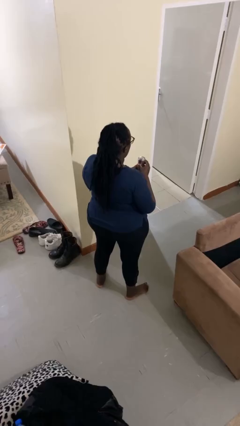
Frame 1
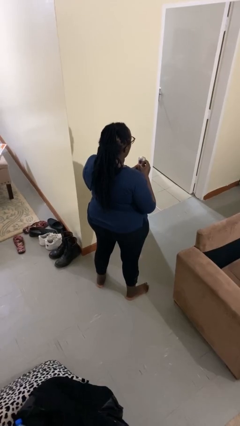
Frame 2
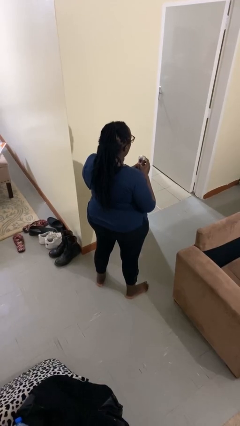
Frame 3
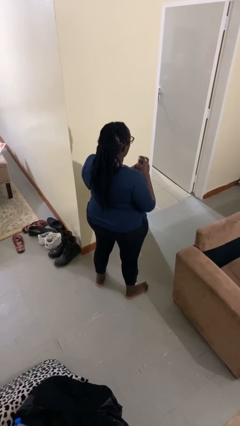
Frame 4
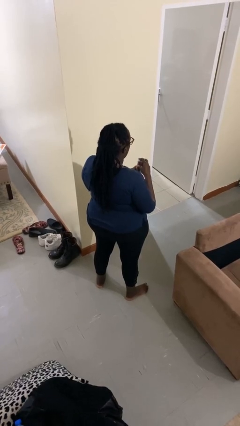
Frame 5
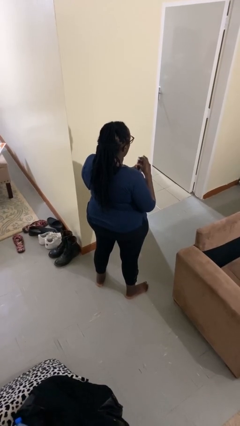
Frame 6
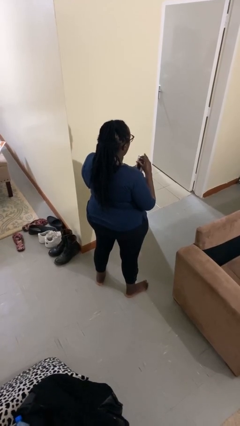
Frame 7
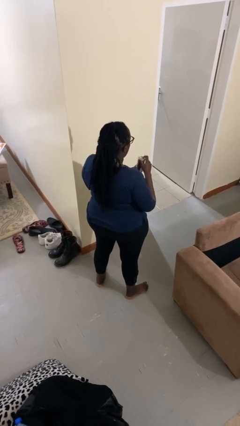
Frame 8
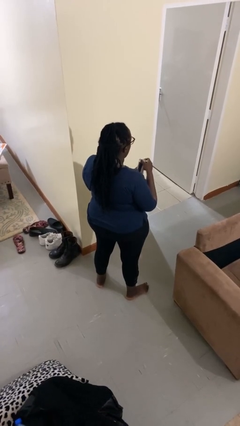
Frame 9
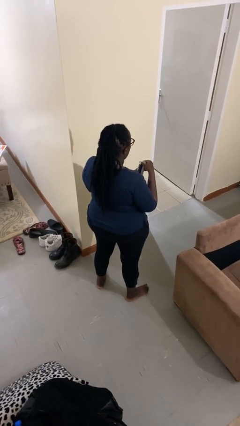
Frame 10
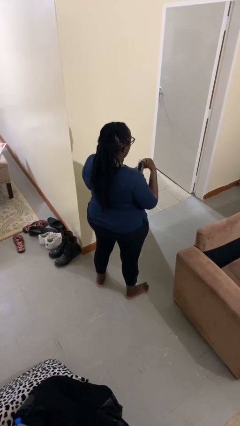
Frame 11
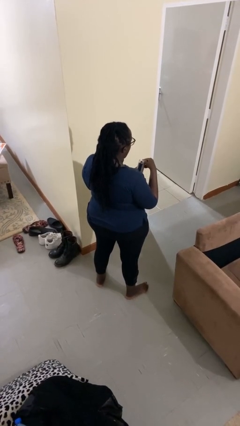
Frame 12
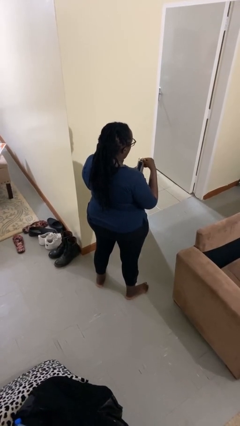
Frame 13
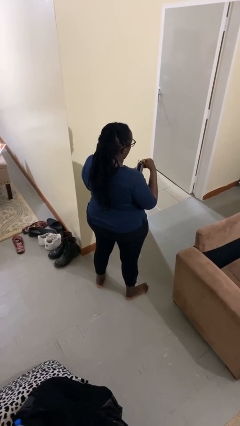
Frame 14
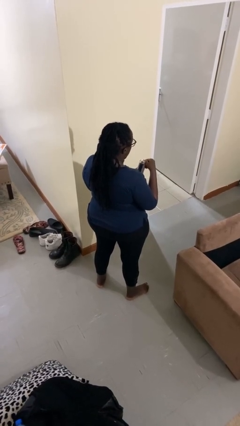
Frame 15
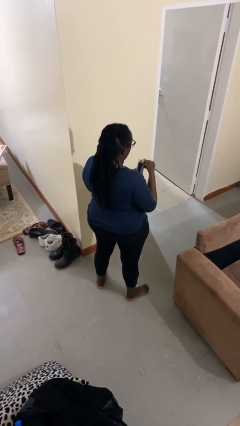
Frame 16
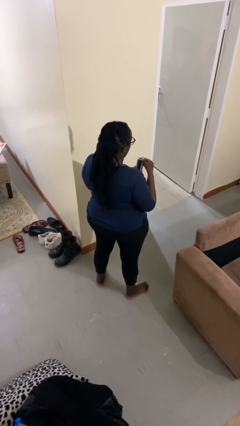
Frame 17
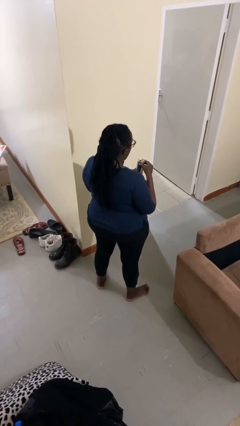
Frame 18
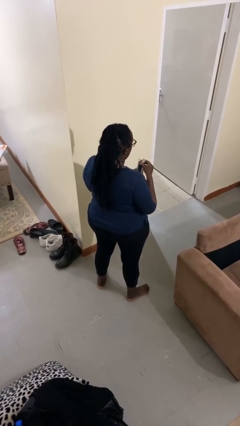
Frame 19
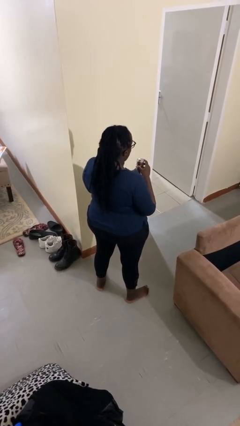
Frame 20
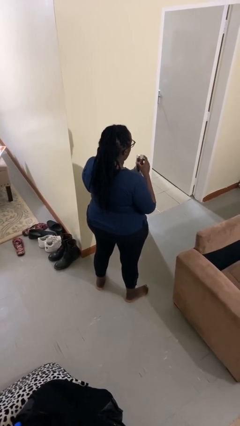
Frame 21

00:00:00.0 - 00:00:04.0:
person opens beverage can

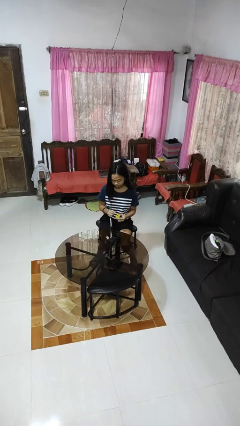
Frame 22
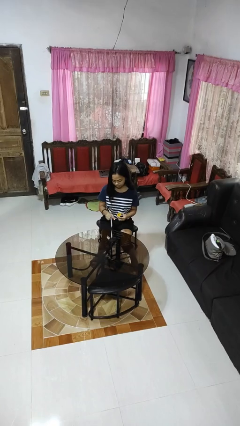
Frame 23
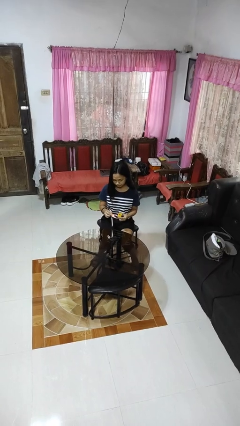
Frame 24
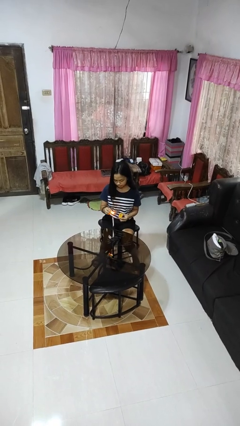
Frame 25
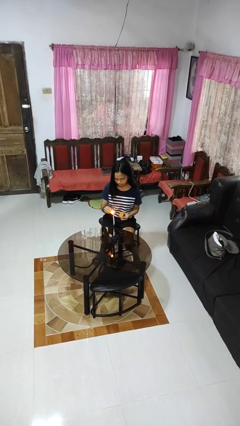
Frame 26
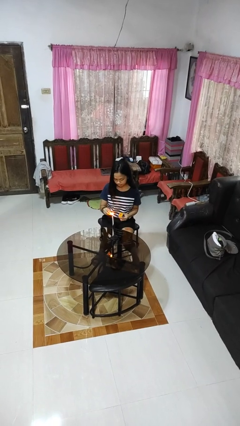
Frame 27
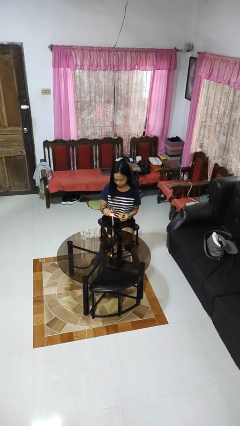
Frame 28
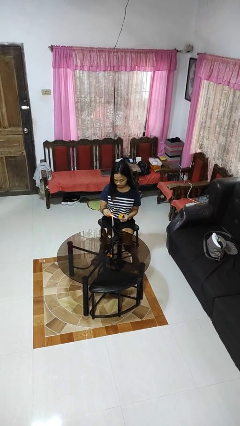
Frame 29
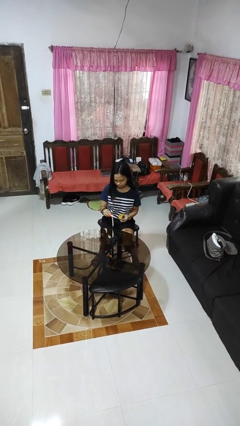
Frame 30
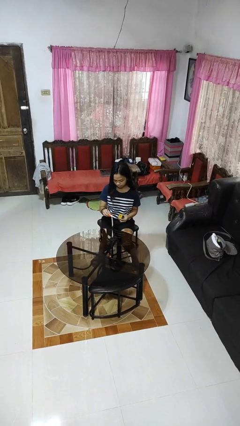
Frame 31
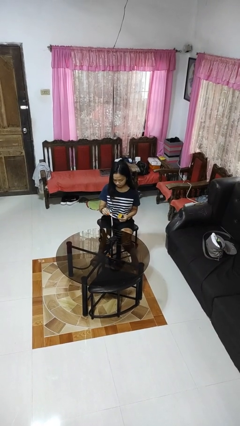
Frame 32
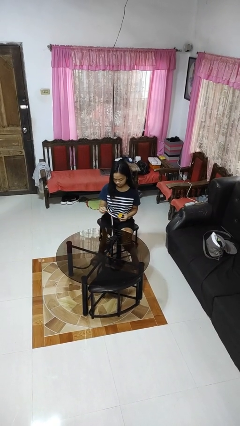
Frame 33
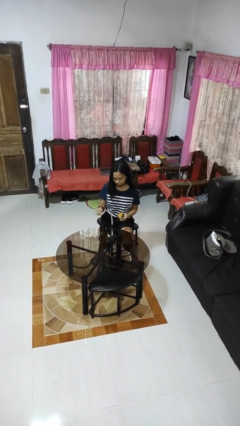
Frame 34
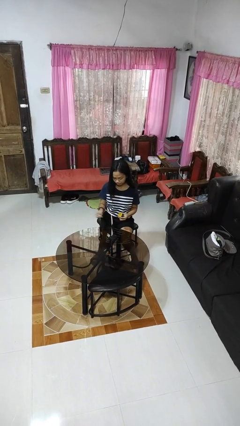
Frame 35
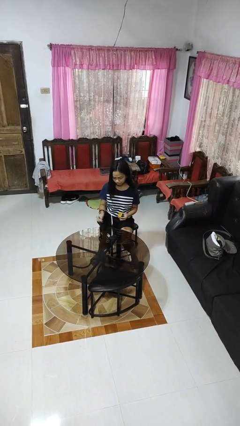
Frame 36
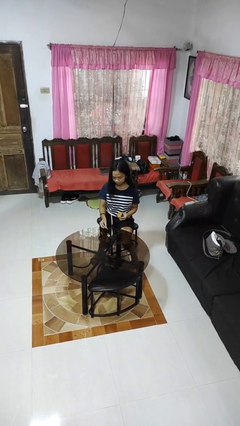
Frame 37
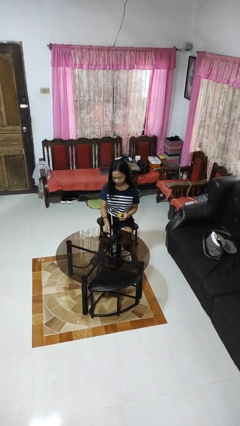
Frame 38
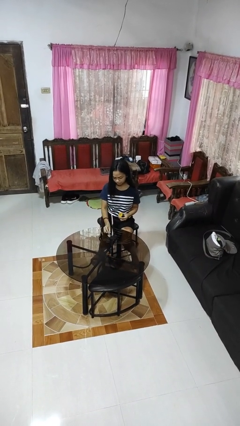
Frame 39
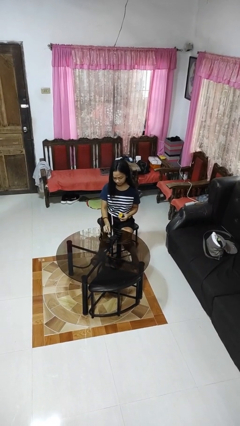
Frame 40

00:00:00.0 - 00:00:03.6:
person lights candle

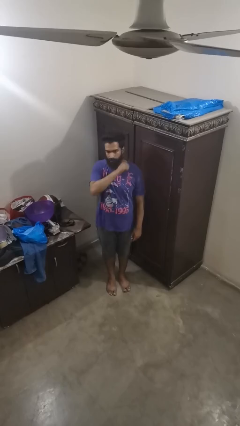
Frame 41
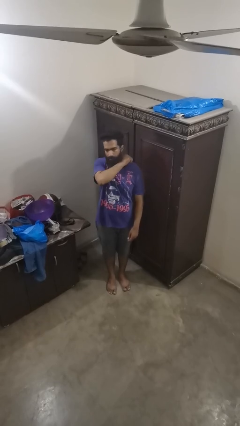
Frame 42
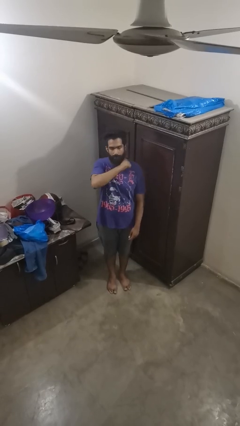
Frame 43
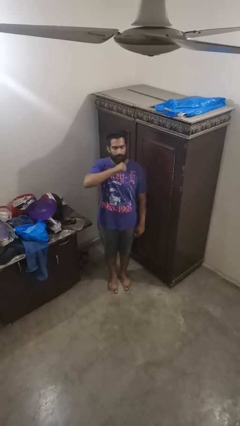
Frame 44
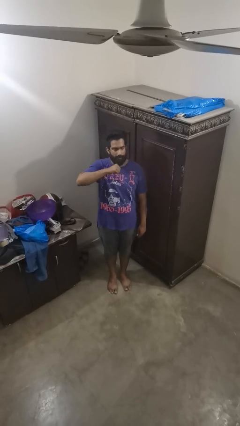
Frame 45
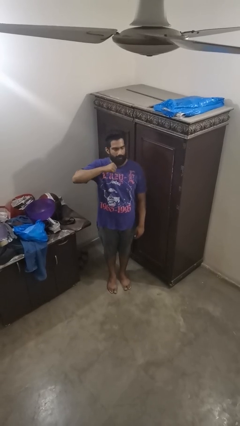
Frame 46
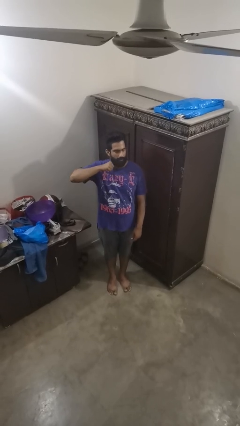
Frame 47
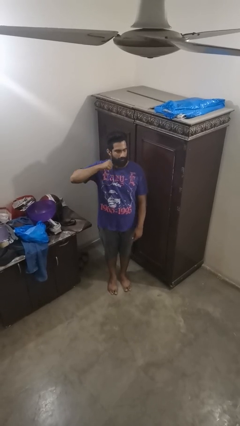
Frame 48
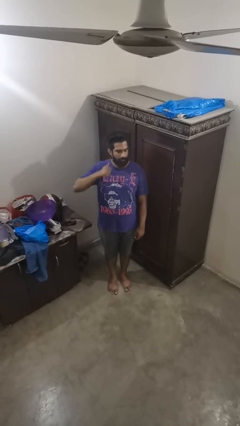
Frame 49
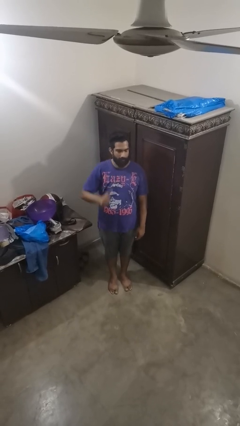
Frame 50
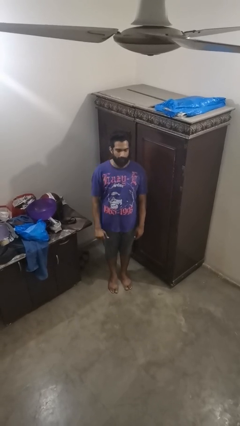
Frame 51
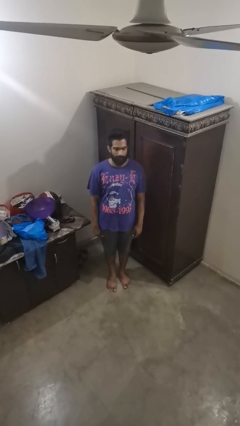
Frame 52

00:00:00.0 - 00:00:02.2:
person gestures cut

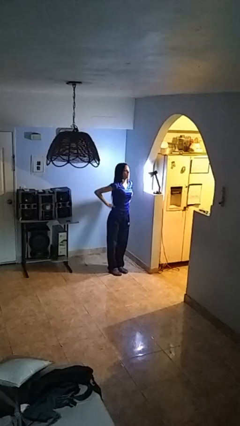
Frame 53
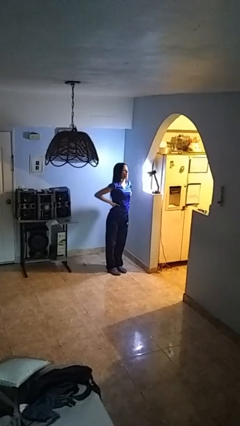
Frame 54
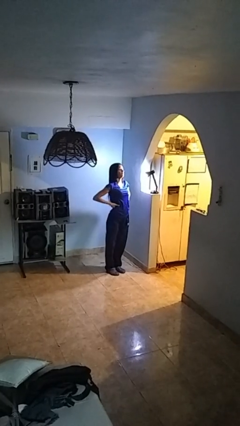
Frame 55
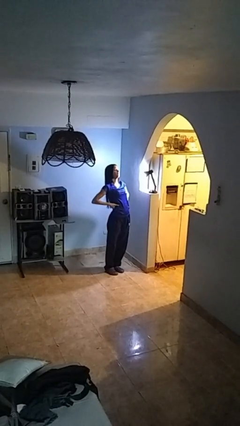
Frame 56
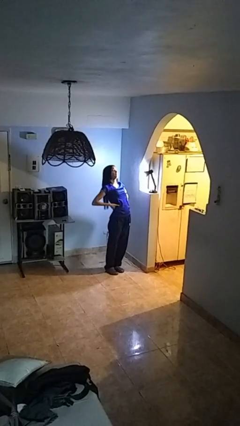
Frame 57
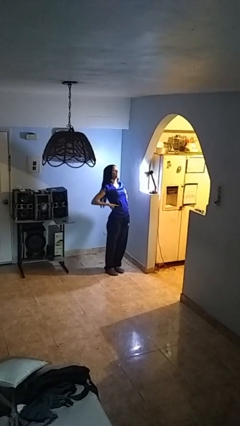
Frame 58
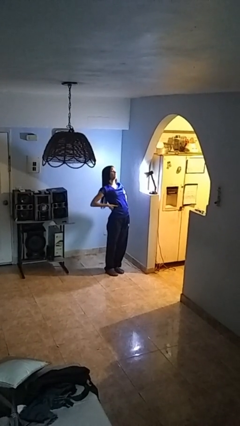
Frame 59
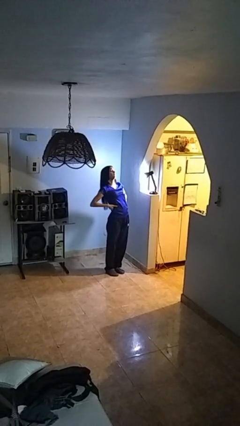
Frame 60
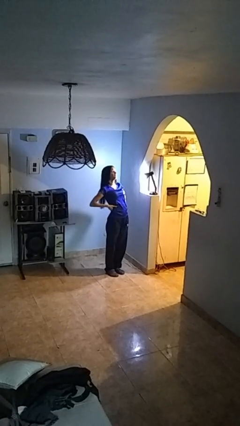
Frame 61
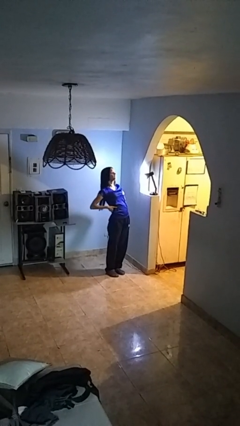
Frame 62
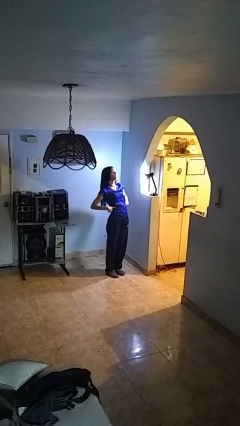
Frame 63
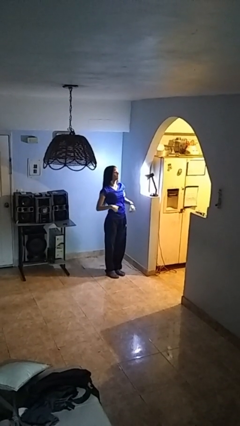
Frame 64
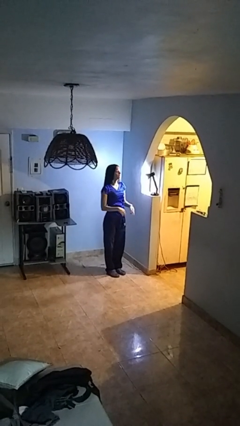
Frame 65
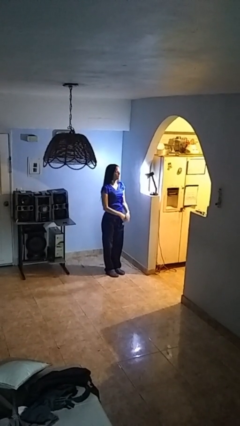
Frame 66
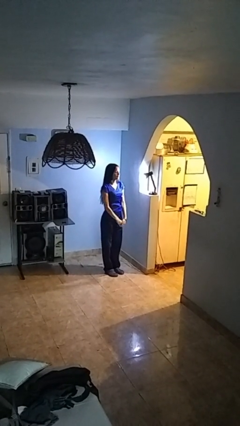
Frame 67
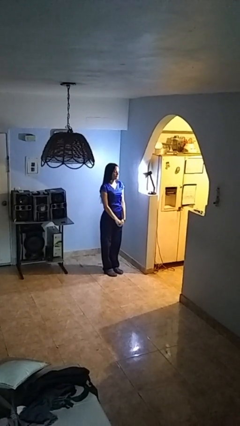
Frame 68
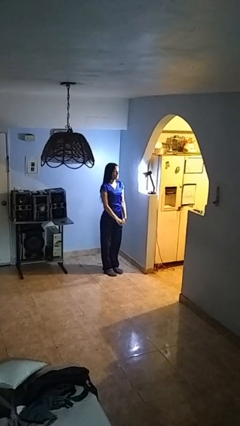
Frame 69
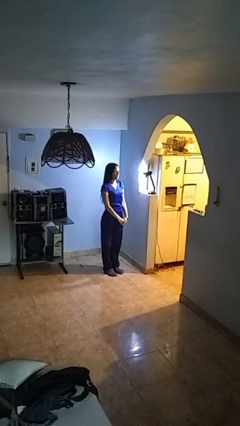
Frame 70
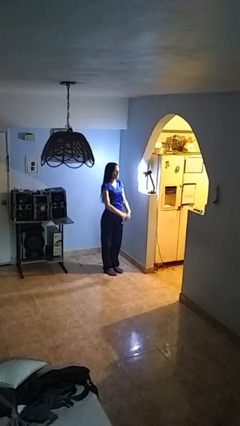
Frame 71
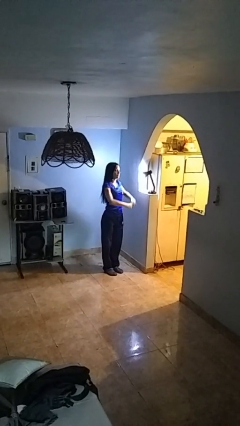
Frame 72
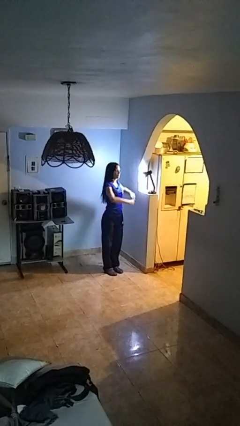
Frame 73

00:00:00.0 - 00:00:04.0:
person stretches back

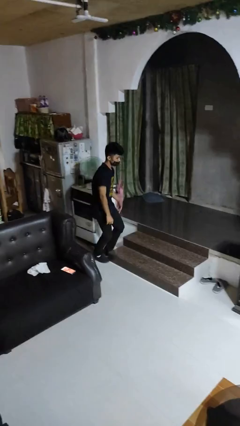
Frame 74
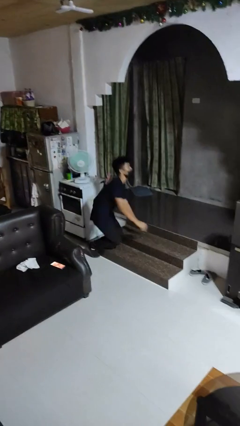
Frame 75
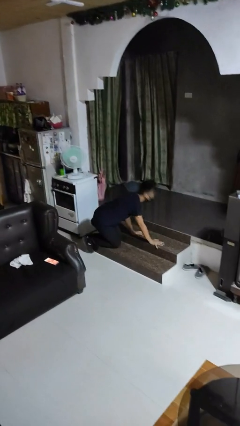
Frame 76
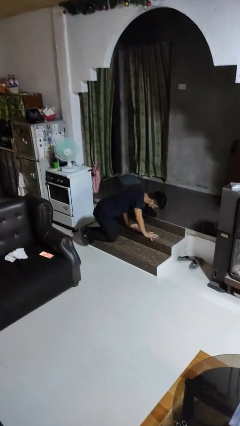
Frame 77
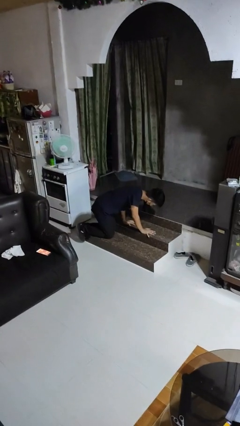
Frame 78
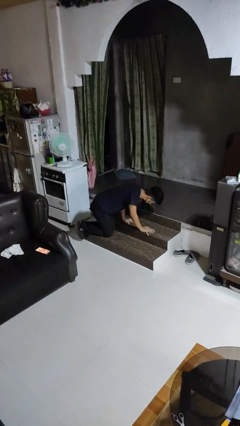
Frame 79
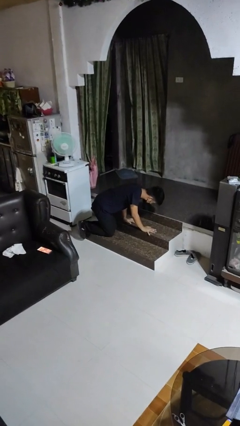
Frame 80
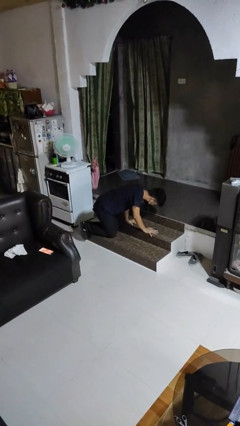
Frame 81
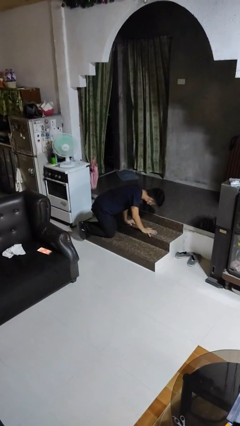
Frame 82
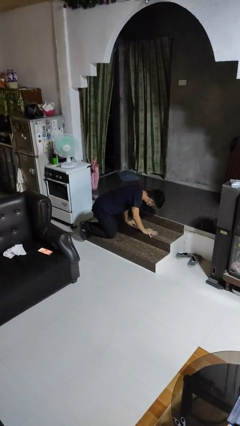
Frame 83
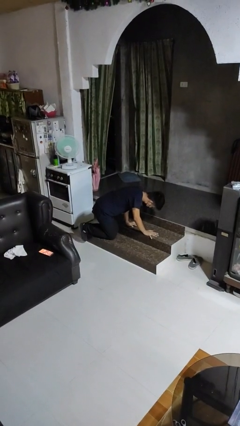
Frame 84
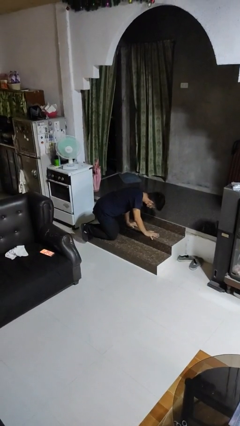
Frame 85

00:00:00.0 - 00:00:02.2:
person trips on object on floor

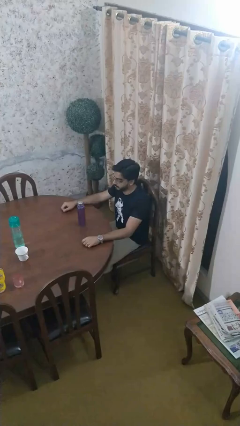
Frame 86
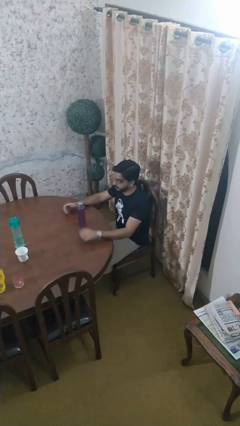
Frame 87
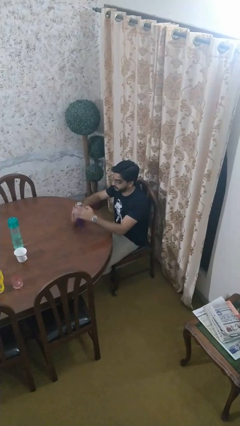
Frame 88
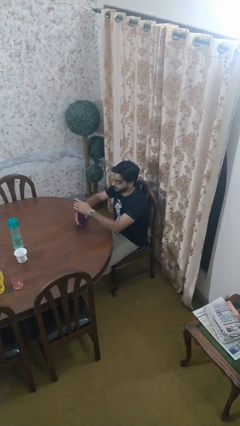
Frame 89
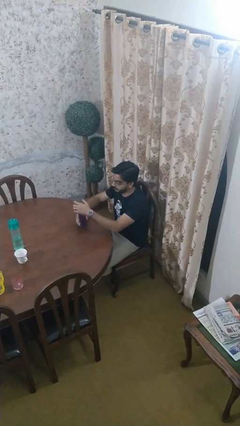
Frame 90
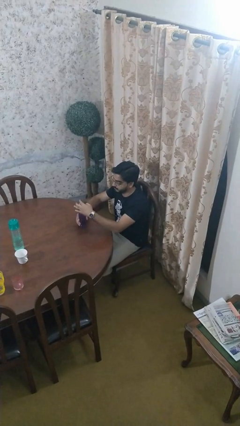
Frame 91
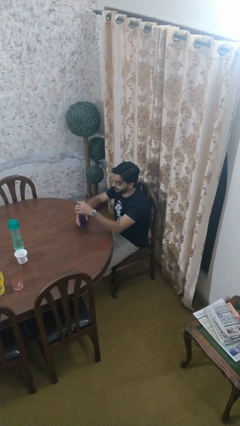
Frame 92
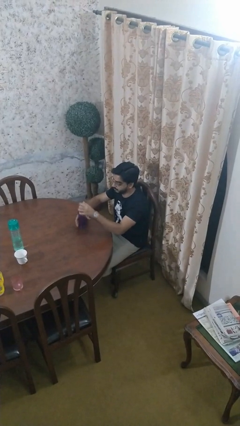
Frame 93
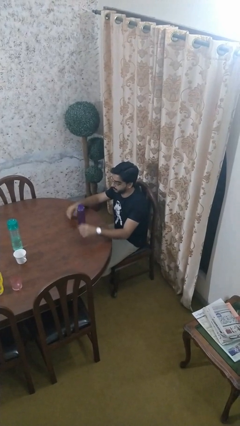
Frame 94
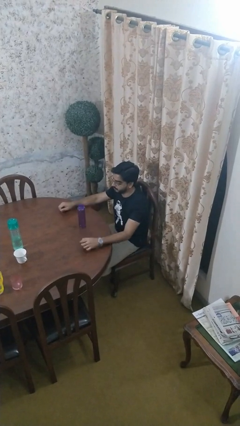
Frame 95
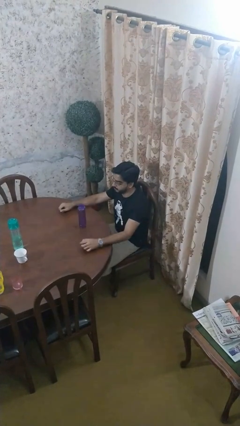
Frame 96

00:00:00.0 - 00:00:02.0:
person unscrews lid from bottle
